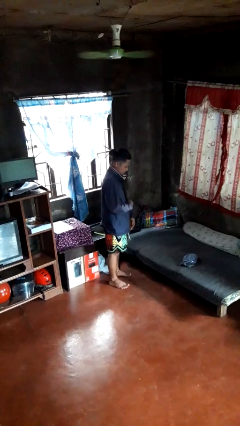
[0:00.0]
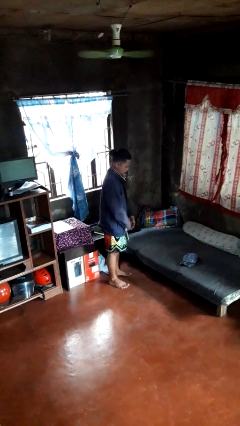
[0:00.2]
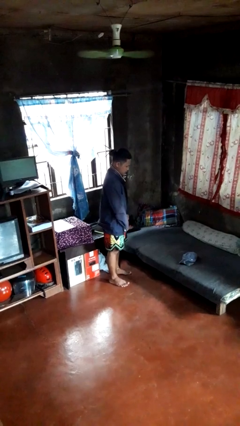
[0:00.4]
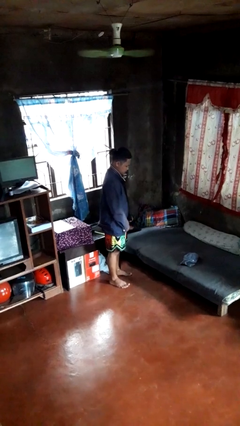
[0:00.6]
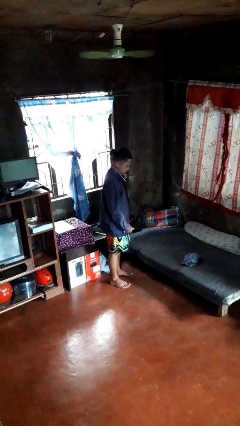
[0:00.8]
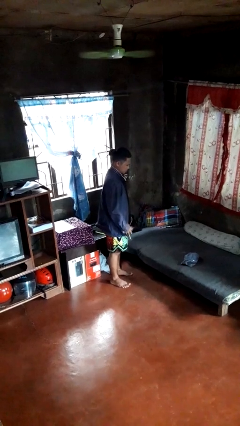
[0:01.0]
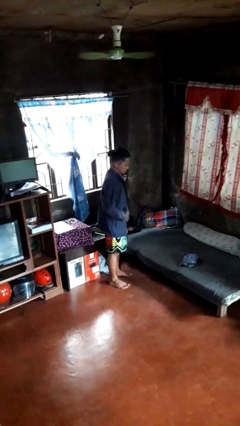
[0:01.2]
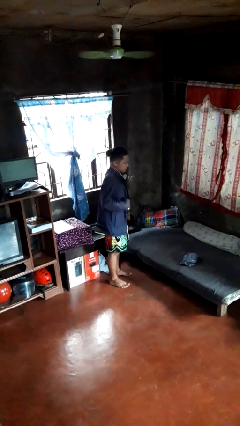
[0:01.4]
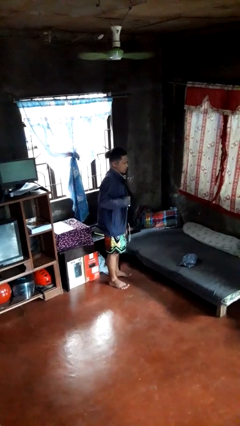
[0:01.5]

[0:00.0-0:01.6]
person unzips jacket

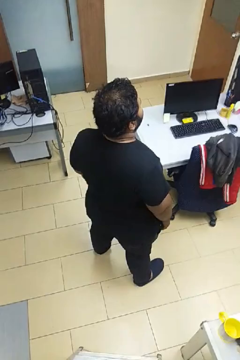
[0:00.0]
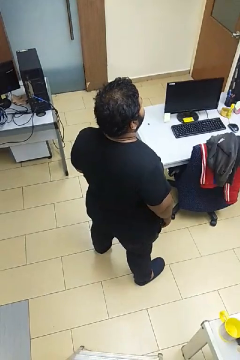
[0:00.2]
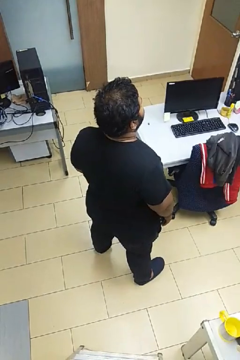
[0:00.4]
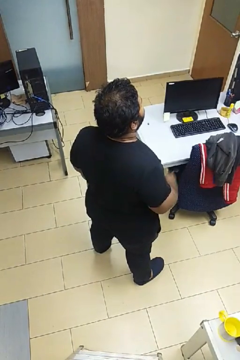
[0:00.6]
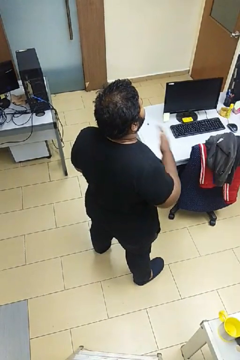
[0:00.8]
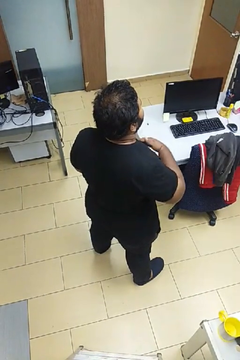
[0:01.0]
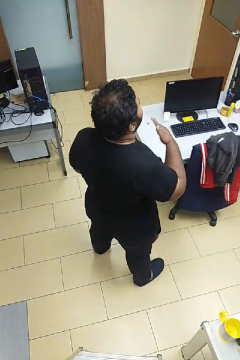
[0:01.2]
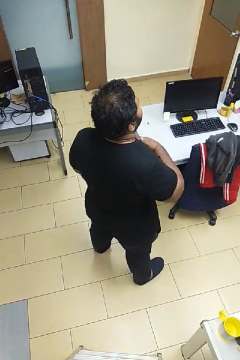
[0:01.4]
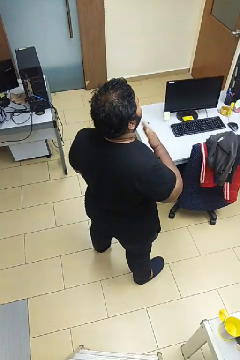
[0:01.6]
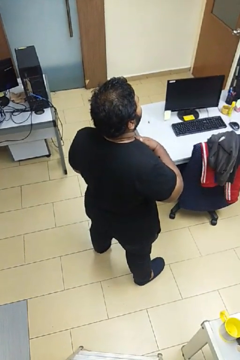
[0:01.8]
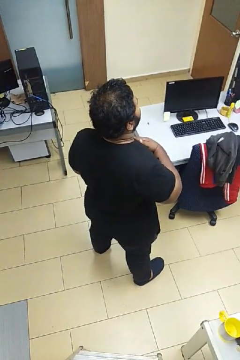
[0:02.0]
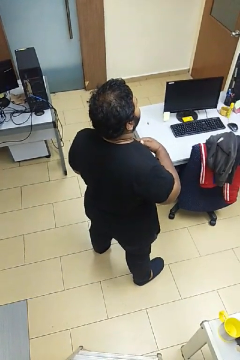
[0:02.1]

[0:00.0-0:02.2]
person drums on chest

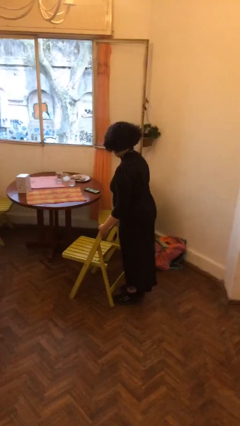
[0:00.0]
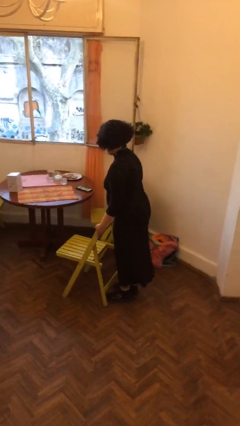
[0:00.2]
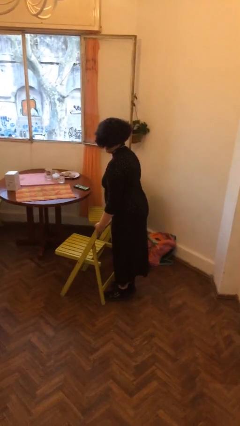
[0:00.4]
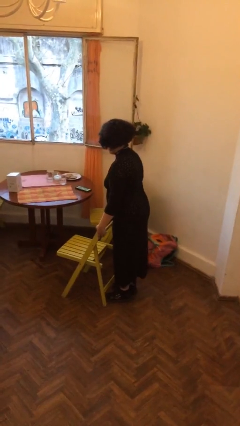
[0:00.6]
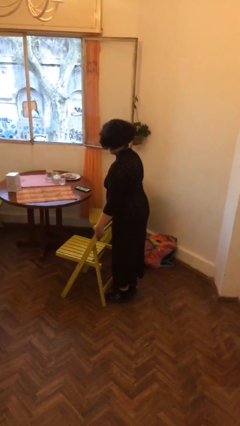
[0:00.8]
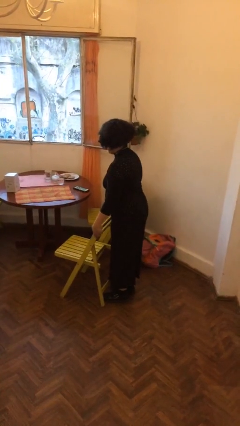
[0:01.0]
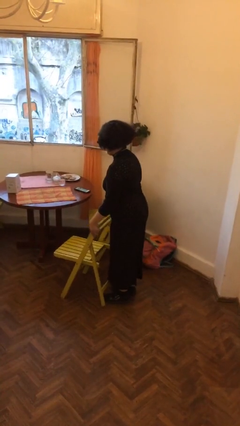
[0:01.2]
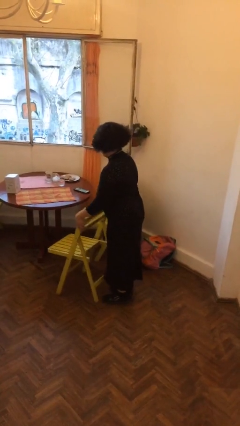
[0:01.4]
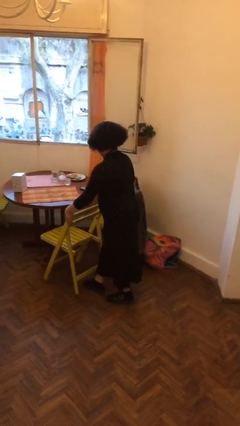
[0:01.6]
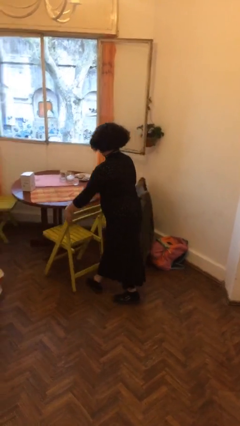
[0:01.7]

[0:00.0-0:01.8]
person pushes in chair

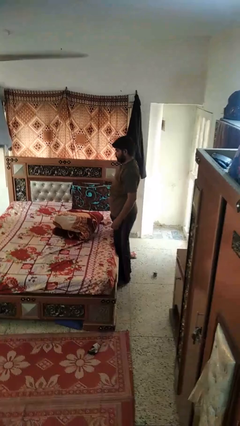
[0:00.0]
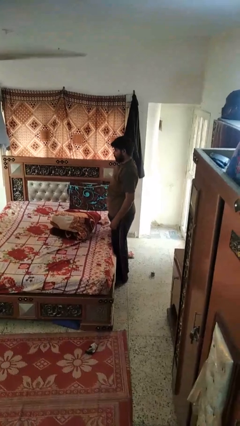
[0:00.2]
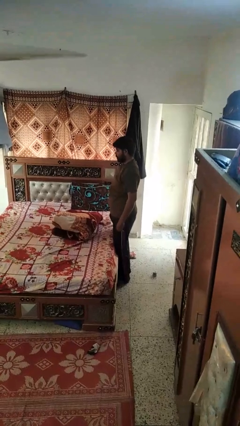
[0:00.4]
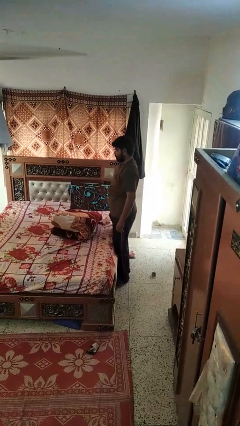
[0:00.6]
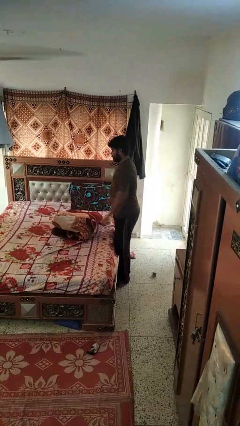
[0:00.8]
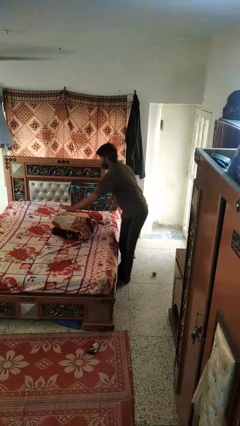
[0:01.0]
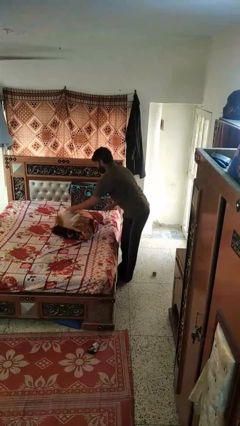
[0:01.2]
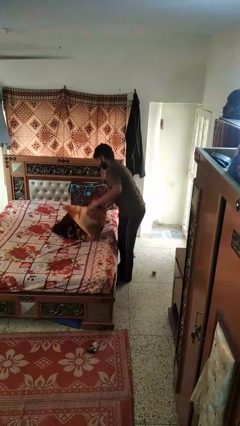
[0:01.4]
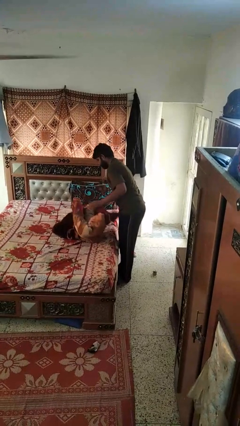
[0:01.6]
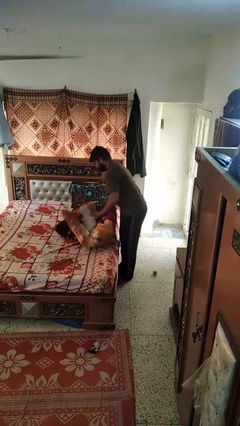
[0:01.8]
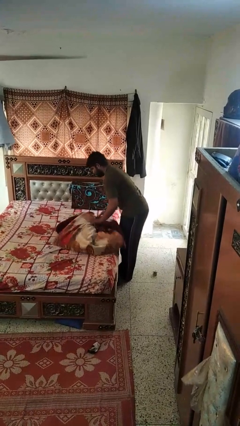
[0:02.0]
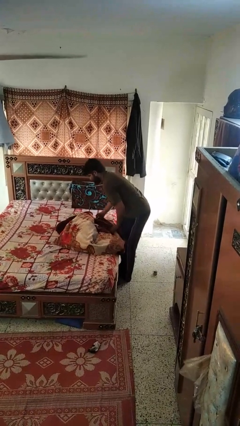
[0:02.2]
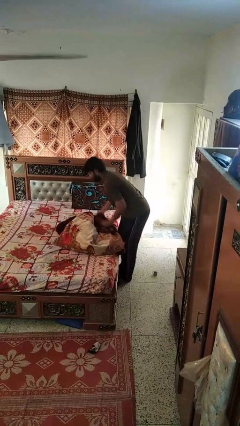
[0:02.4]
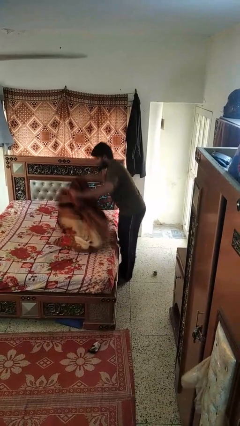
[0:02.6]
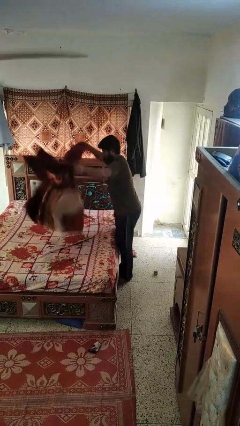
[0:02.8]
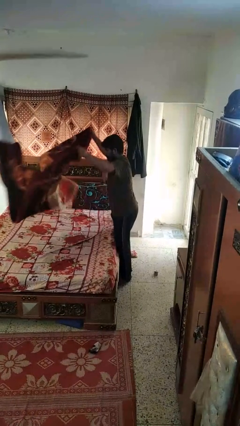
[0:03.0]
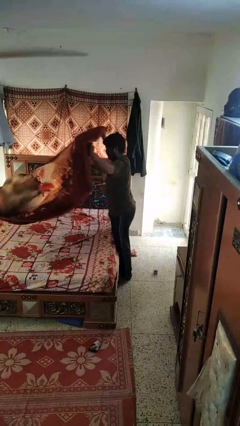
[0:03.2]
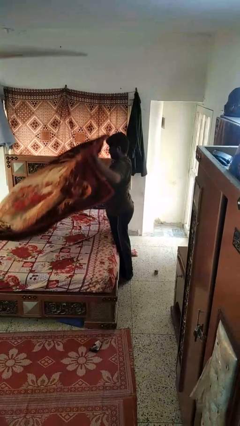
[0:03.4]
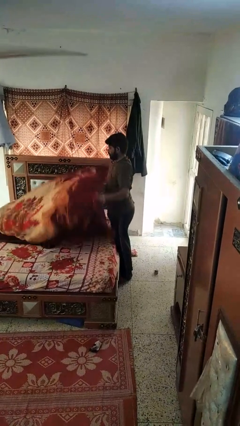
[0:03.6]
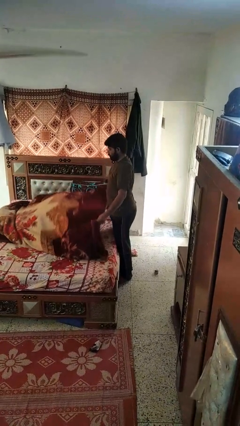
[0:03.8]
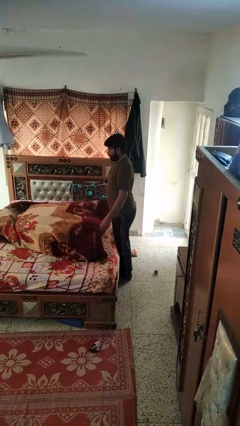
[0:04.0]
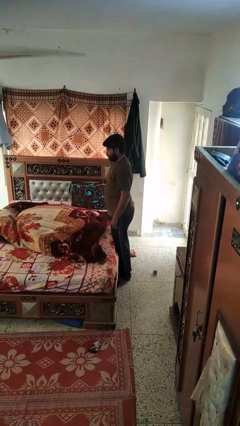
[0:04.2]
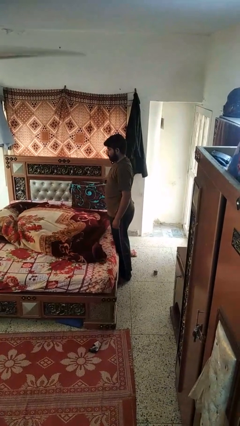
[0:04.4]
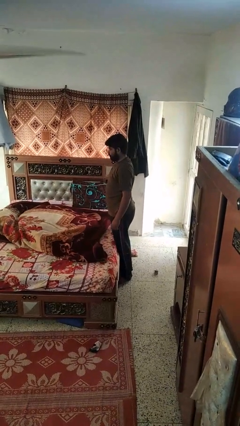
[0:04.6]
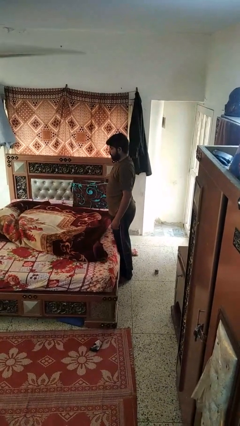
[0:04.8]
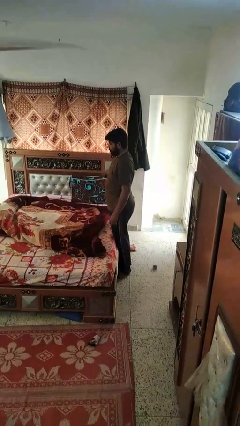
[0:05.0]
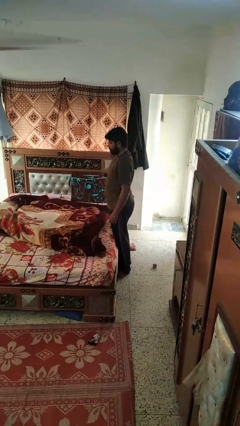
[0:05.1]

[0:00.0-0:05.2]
person unfolds blanket

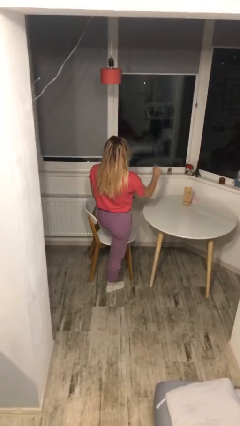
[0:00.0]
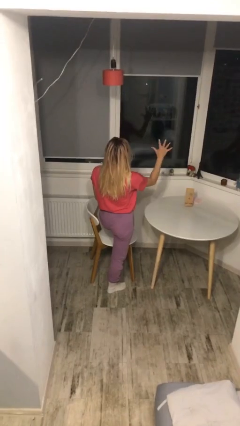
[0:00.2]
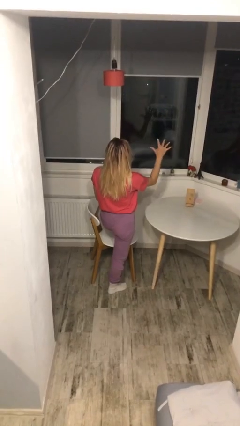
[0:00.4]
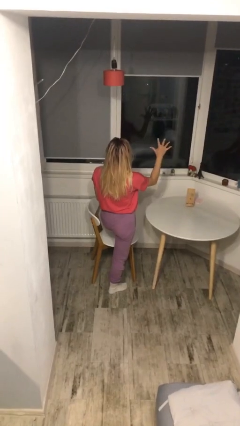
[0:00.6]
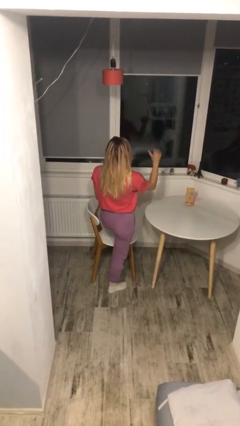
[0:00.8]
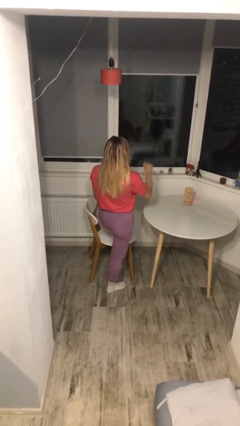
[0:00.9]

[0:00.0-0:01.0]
person gestures number five

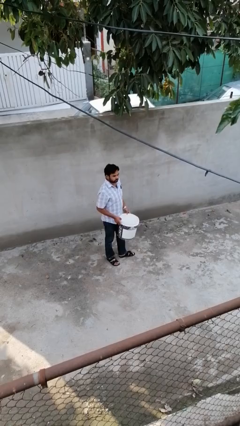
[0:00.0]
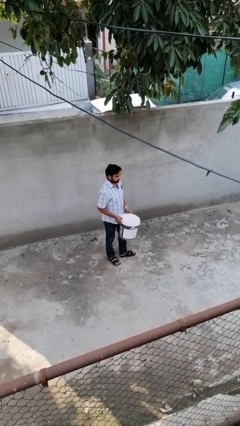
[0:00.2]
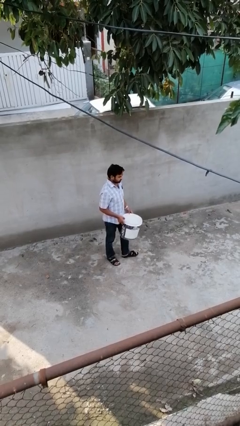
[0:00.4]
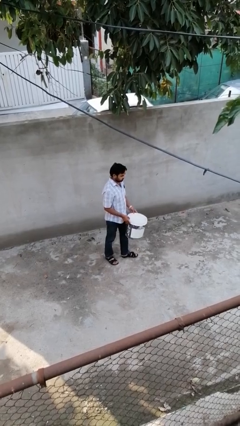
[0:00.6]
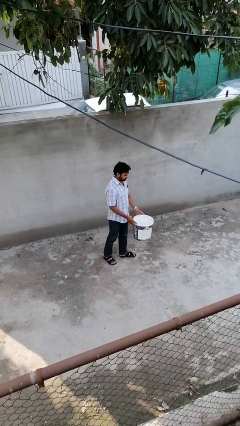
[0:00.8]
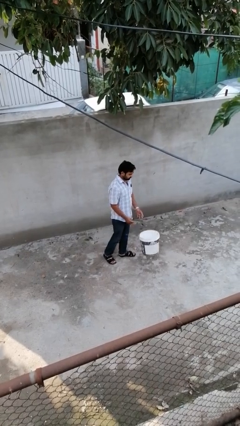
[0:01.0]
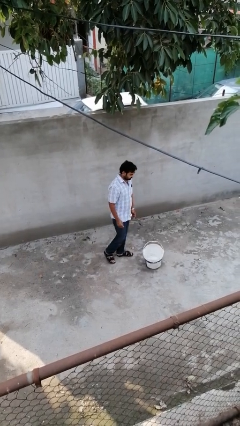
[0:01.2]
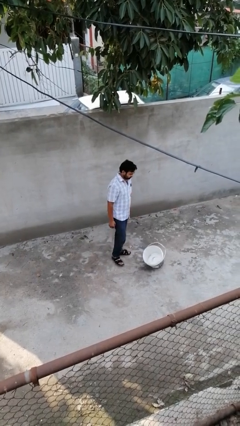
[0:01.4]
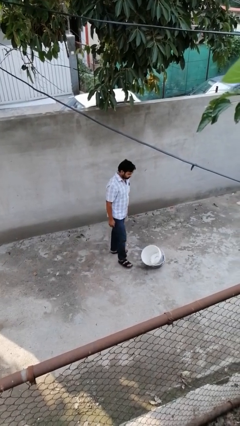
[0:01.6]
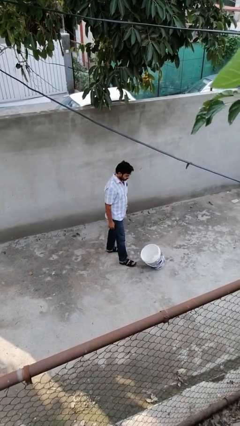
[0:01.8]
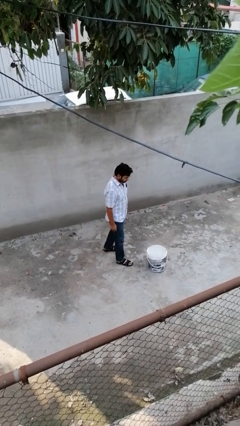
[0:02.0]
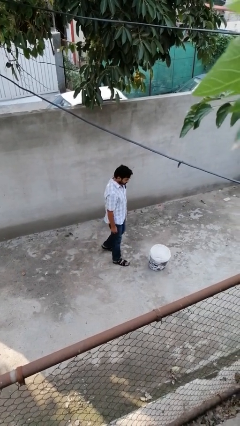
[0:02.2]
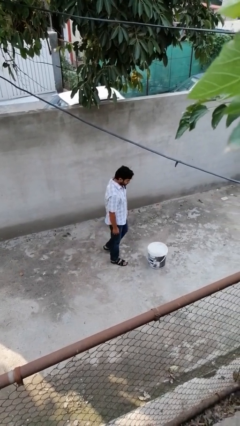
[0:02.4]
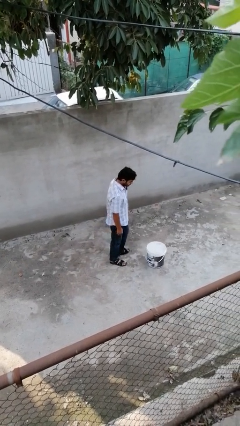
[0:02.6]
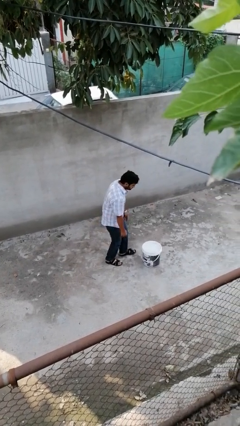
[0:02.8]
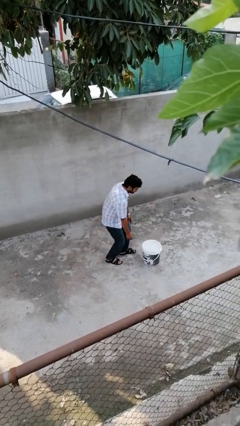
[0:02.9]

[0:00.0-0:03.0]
person drops object

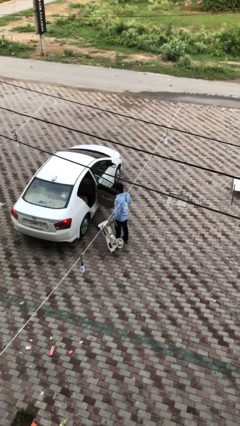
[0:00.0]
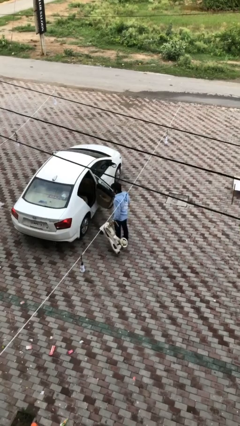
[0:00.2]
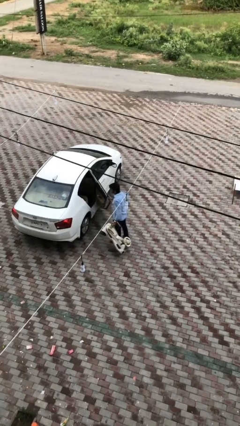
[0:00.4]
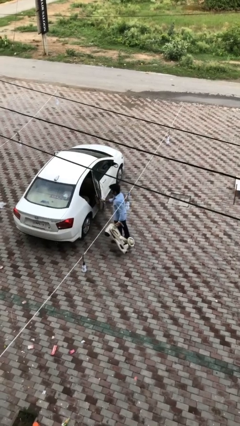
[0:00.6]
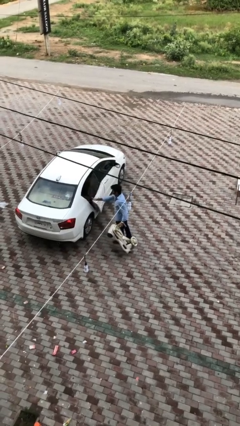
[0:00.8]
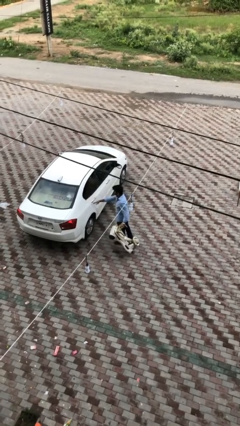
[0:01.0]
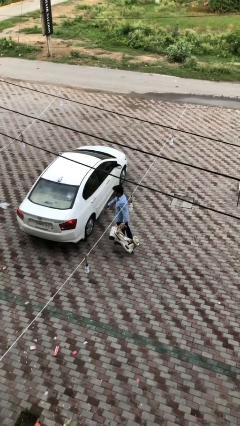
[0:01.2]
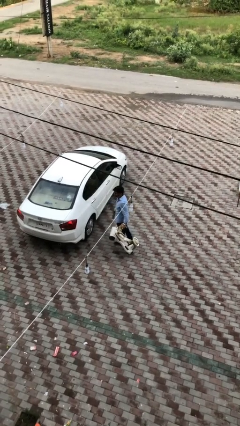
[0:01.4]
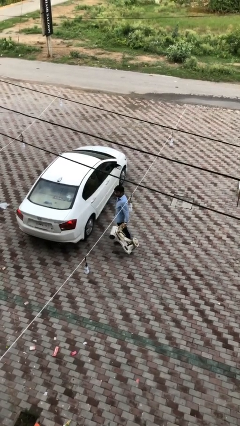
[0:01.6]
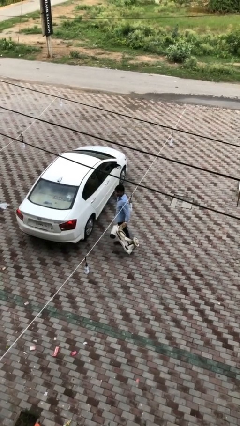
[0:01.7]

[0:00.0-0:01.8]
person closes car door

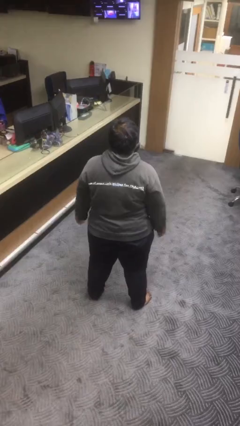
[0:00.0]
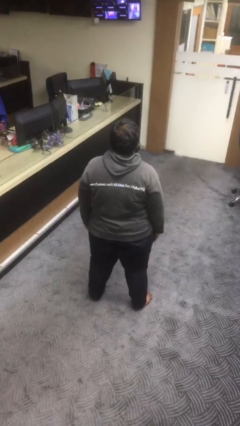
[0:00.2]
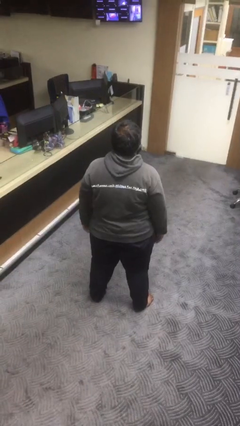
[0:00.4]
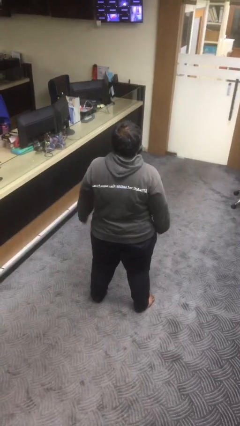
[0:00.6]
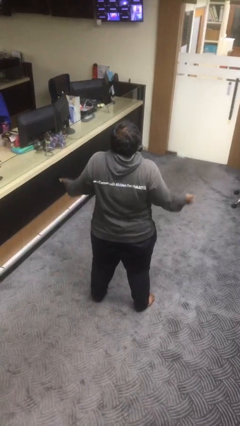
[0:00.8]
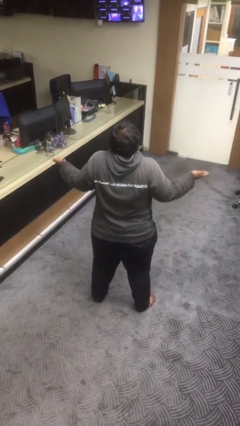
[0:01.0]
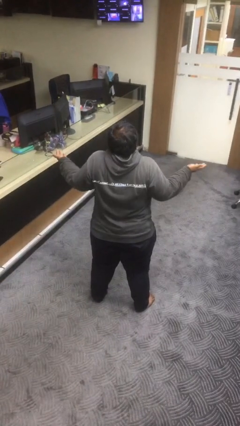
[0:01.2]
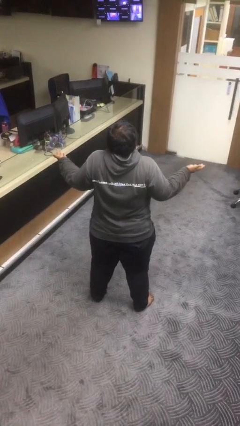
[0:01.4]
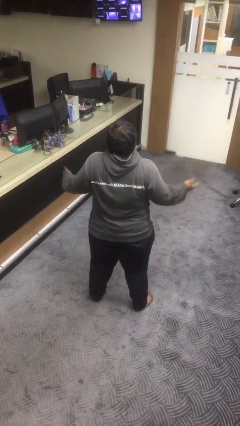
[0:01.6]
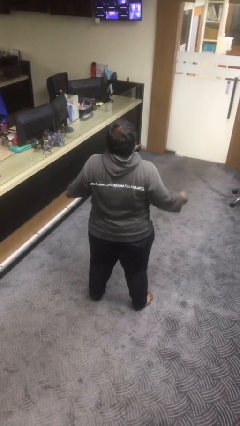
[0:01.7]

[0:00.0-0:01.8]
person shrugs
